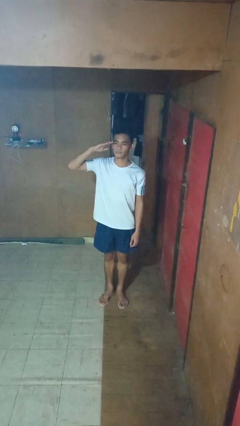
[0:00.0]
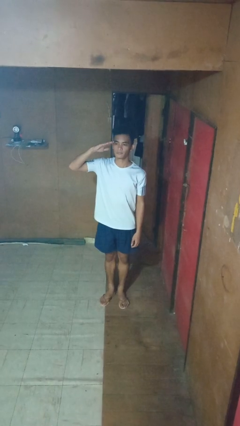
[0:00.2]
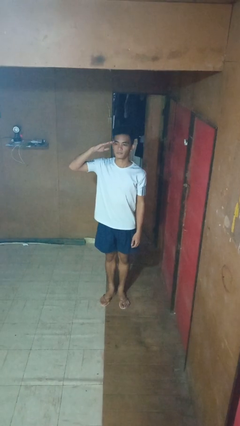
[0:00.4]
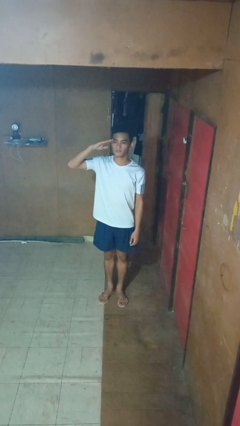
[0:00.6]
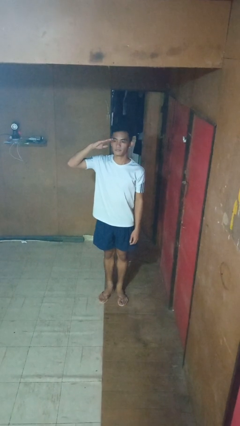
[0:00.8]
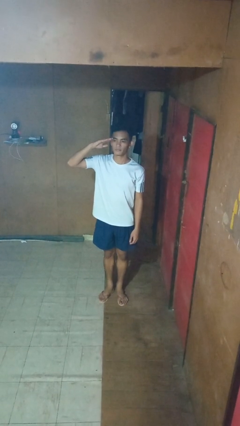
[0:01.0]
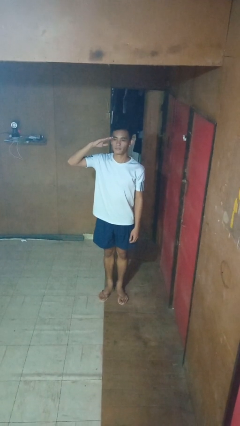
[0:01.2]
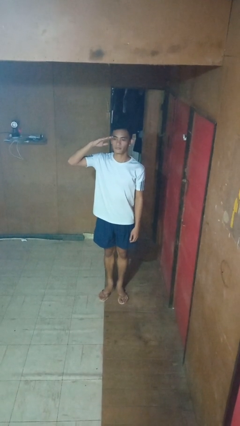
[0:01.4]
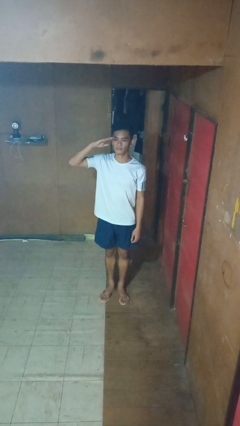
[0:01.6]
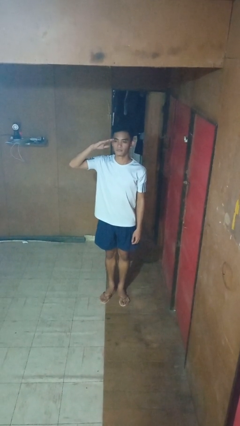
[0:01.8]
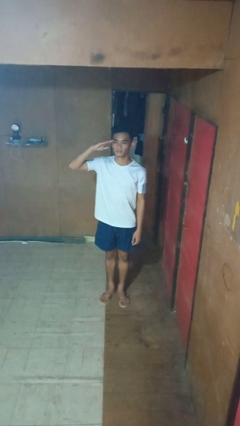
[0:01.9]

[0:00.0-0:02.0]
person salutes

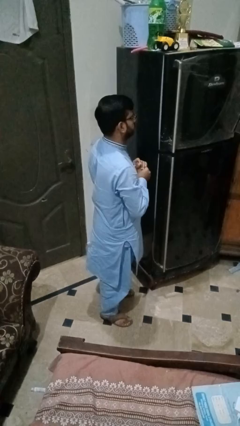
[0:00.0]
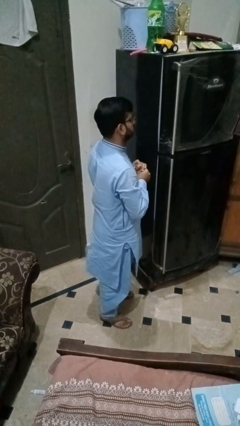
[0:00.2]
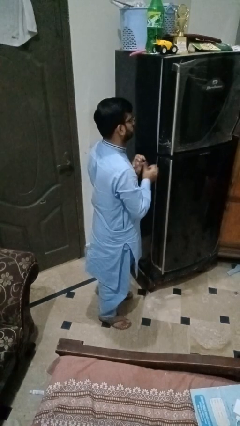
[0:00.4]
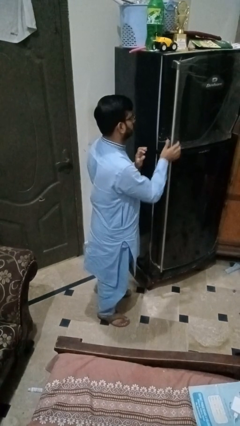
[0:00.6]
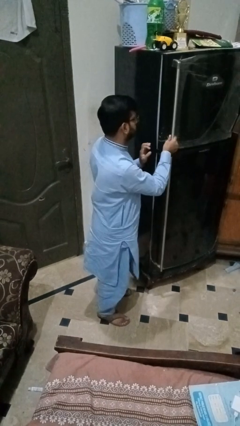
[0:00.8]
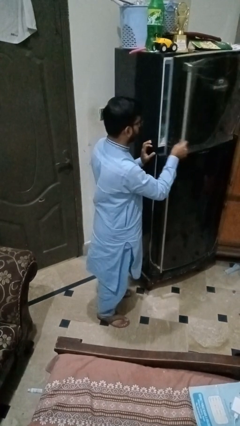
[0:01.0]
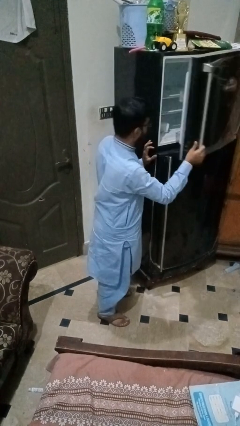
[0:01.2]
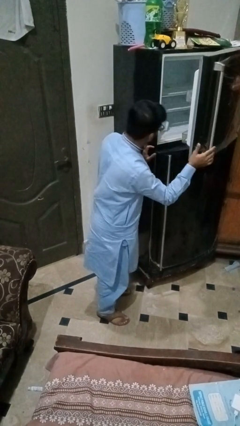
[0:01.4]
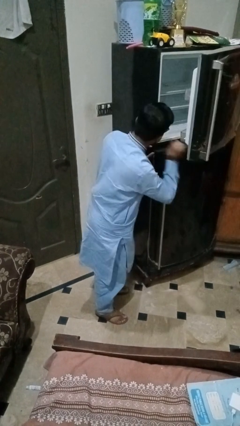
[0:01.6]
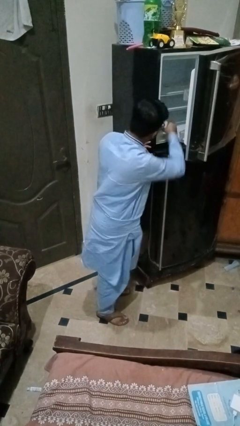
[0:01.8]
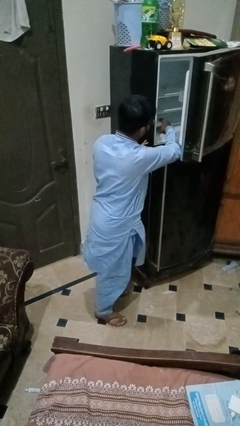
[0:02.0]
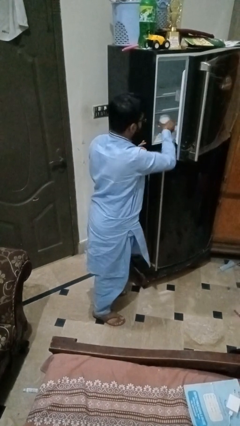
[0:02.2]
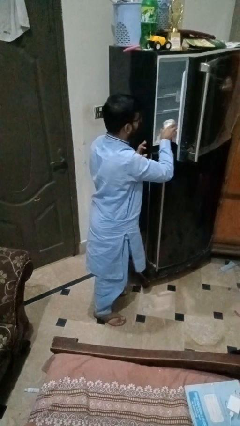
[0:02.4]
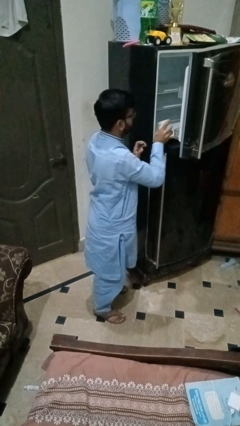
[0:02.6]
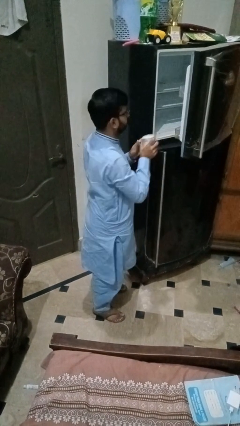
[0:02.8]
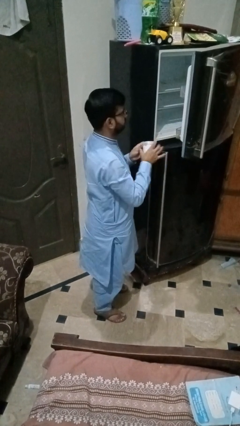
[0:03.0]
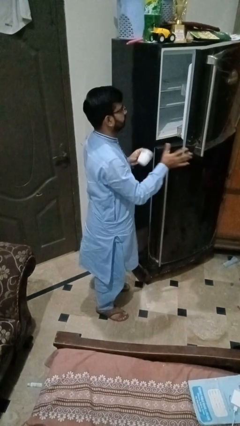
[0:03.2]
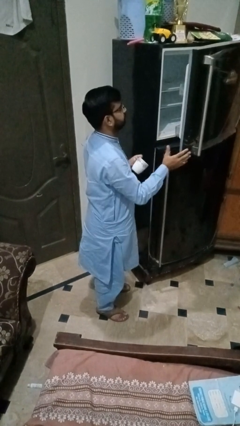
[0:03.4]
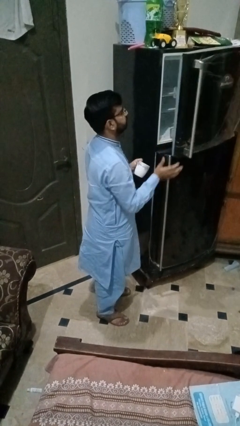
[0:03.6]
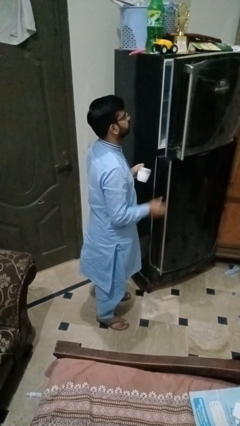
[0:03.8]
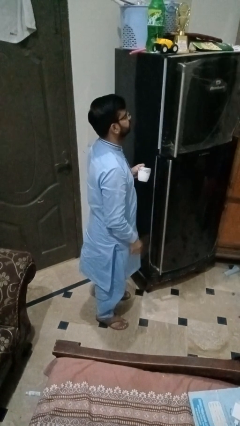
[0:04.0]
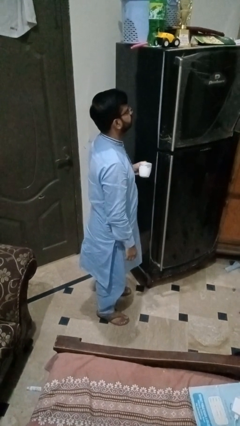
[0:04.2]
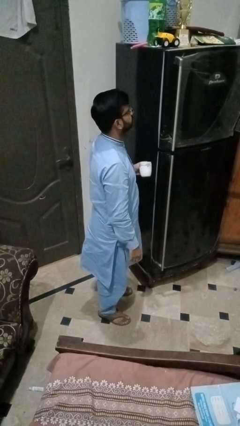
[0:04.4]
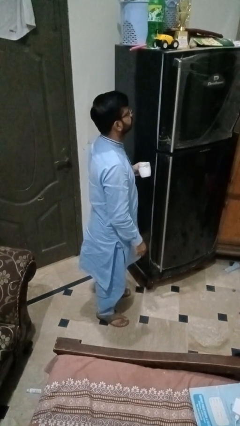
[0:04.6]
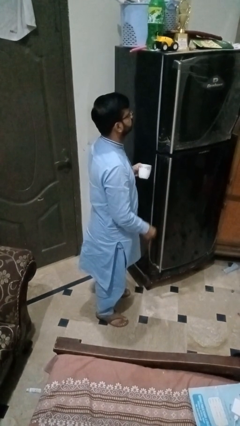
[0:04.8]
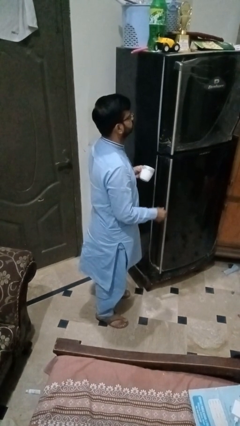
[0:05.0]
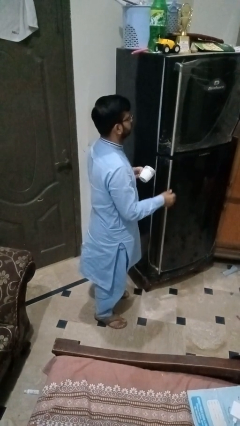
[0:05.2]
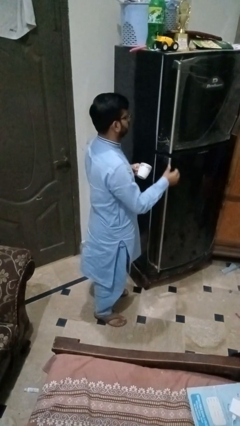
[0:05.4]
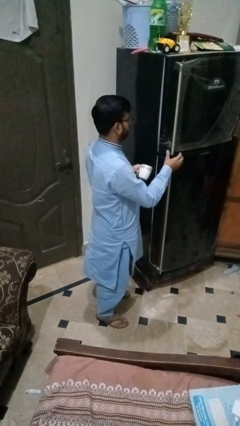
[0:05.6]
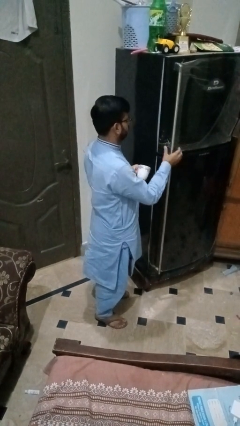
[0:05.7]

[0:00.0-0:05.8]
person takes object from refrigerator

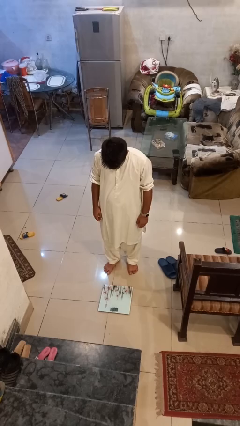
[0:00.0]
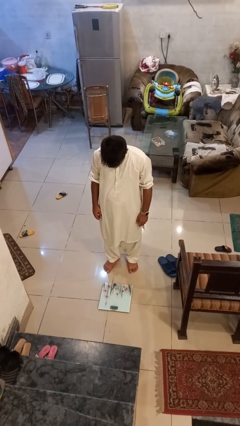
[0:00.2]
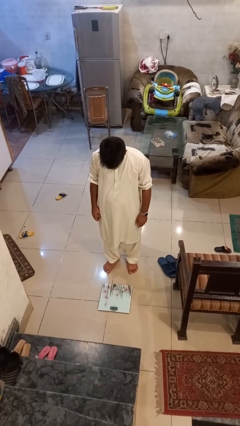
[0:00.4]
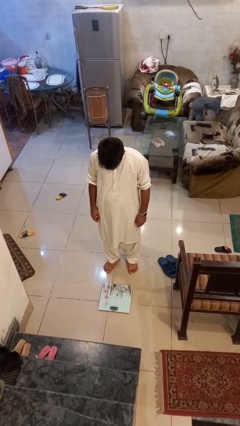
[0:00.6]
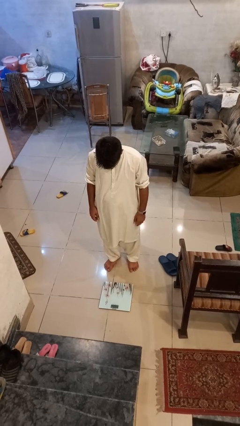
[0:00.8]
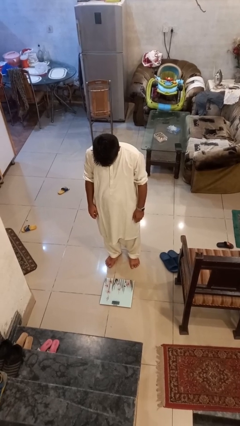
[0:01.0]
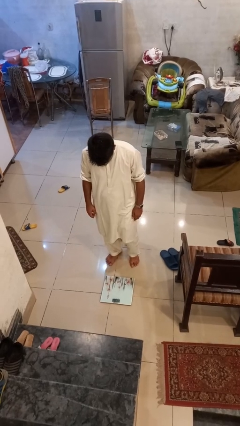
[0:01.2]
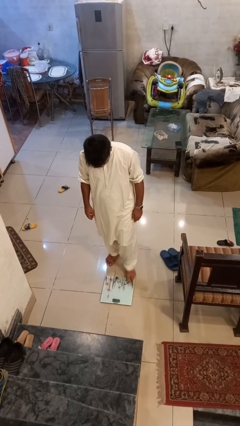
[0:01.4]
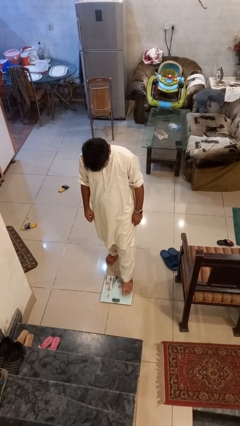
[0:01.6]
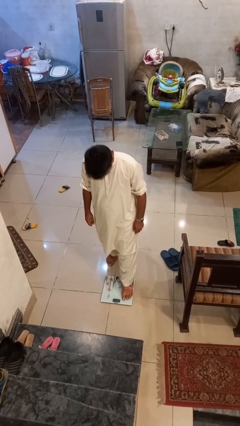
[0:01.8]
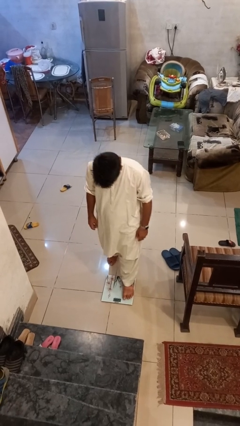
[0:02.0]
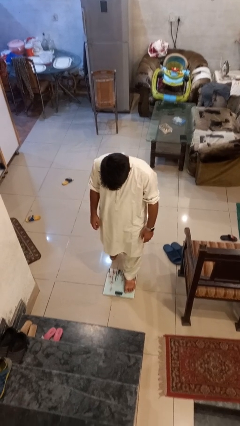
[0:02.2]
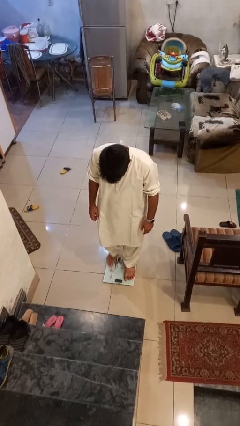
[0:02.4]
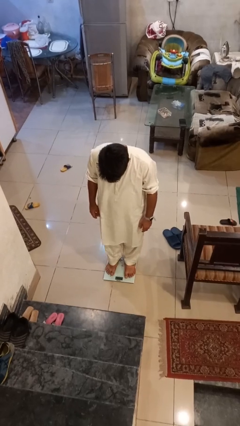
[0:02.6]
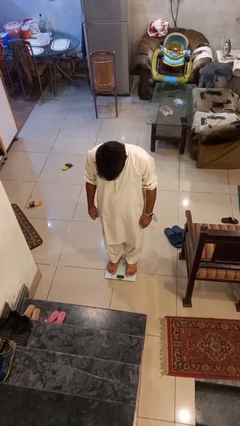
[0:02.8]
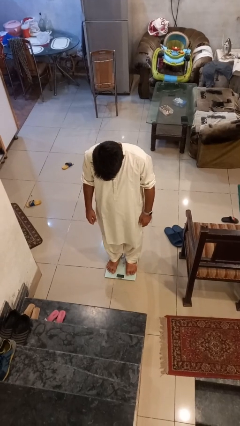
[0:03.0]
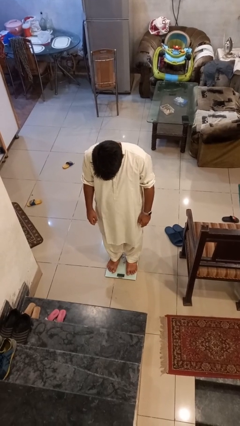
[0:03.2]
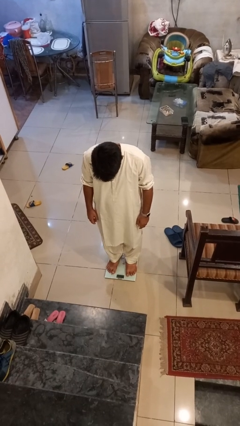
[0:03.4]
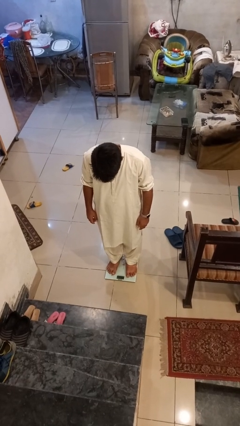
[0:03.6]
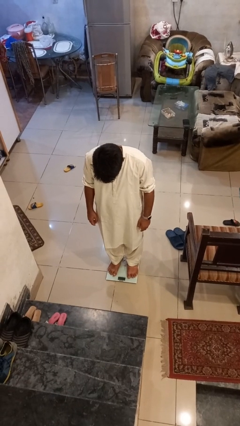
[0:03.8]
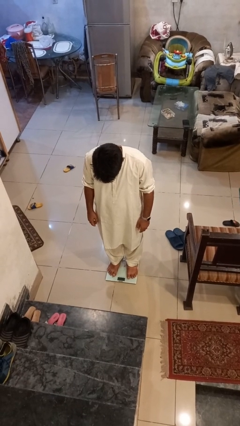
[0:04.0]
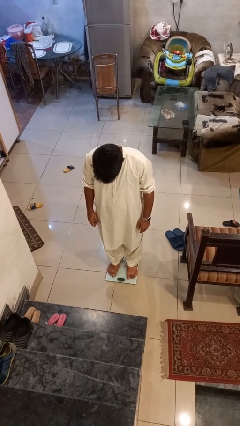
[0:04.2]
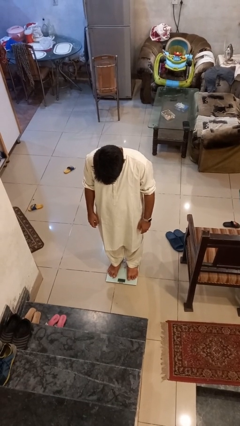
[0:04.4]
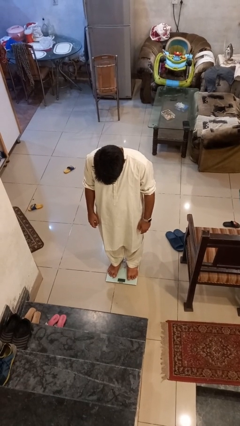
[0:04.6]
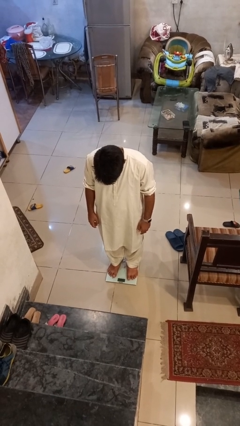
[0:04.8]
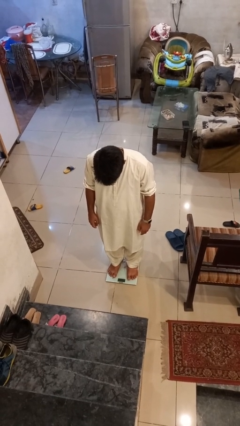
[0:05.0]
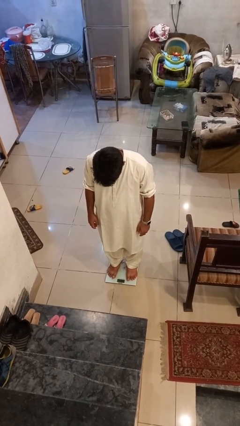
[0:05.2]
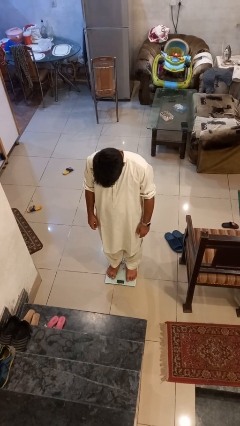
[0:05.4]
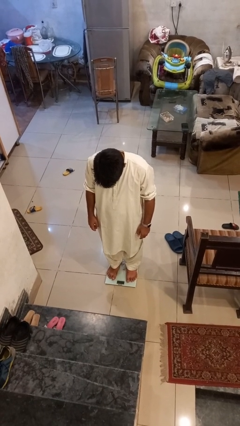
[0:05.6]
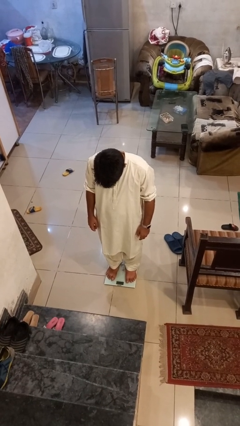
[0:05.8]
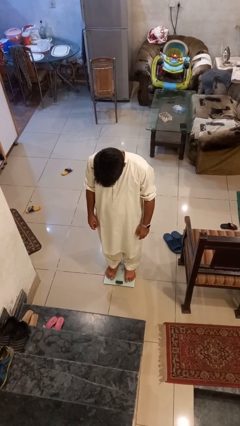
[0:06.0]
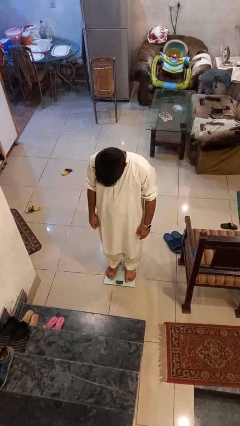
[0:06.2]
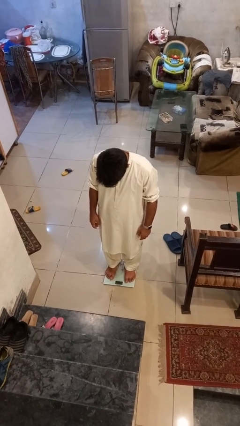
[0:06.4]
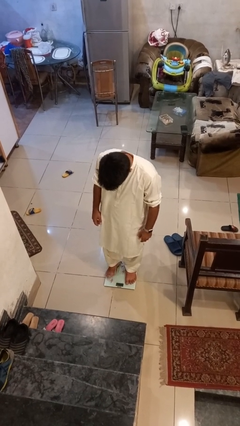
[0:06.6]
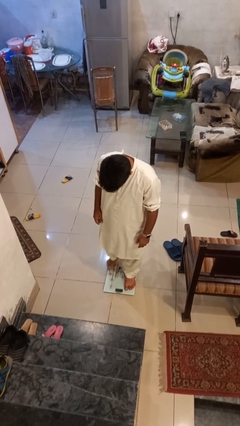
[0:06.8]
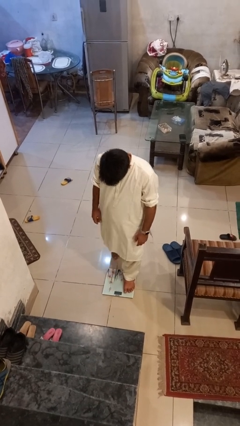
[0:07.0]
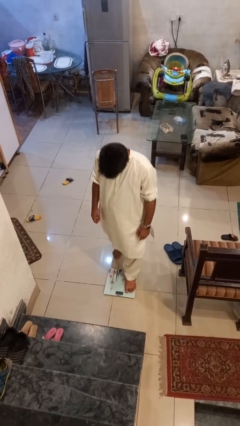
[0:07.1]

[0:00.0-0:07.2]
person uses bodyweight scale

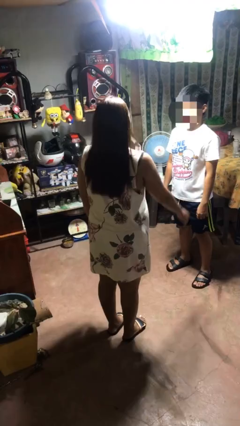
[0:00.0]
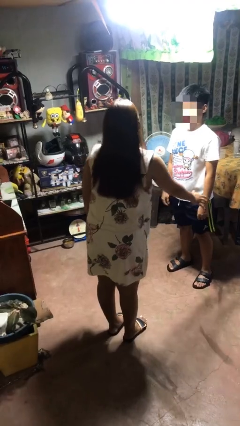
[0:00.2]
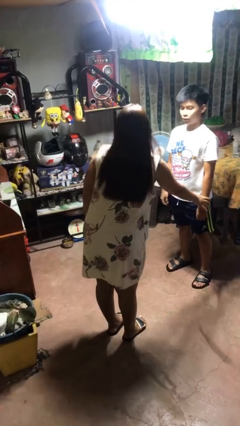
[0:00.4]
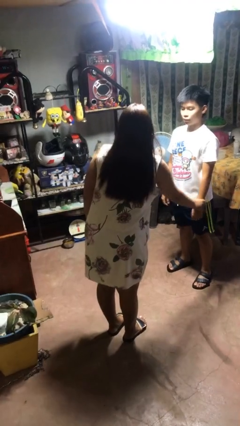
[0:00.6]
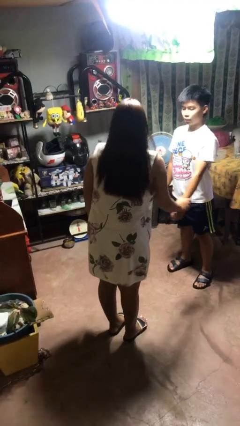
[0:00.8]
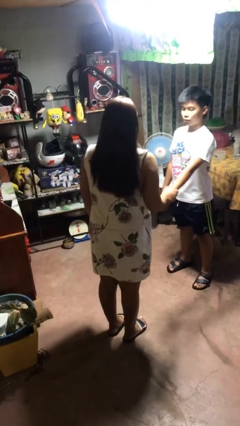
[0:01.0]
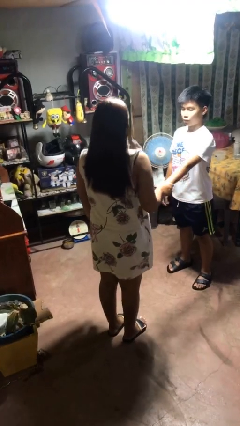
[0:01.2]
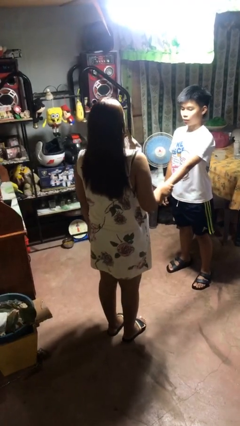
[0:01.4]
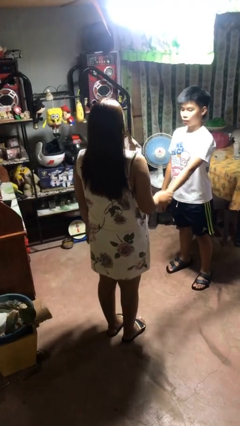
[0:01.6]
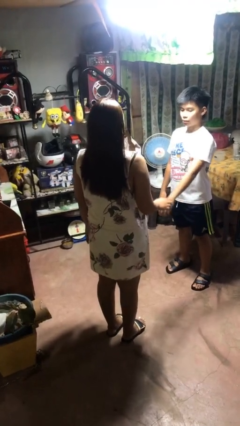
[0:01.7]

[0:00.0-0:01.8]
person grabs person by forearm

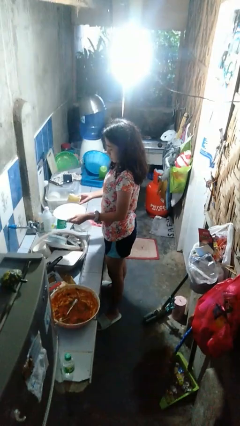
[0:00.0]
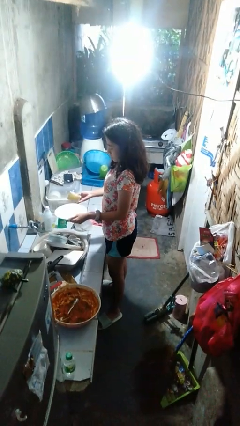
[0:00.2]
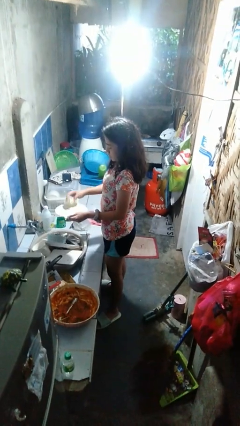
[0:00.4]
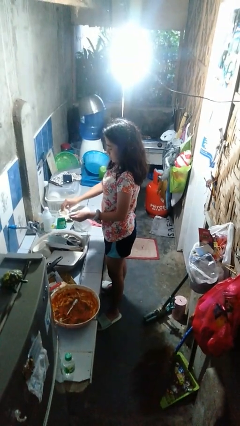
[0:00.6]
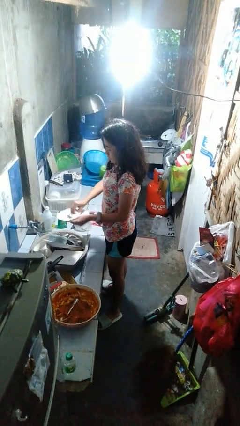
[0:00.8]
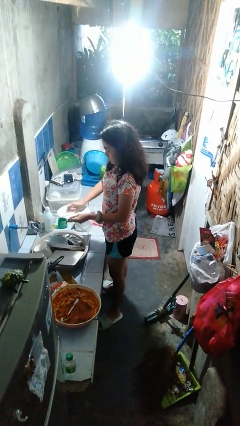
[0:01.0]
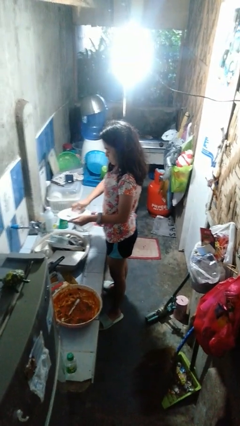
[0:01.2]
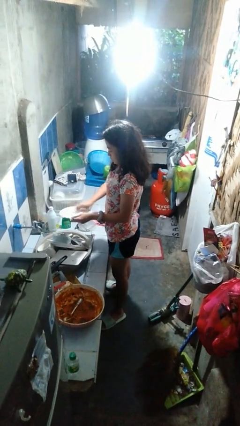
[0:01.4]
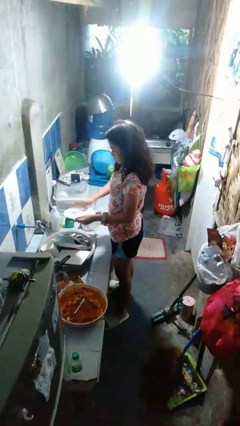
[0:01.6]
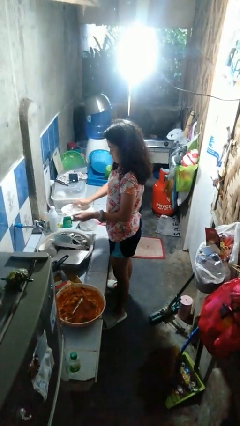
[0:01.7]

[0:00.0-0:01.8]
person washes dish
